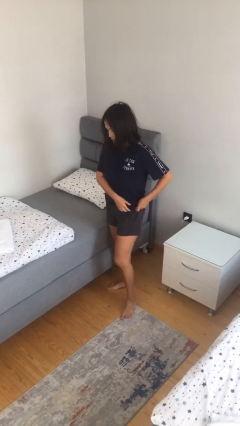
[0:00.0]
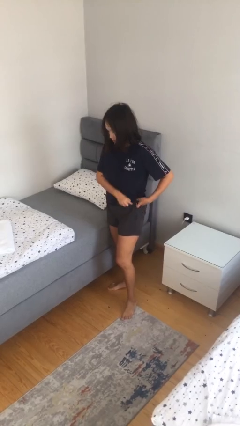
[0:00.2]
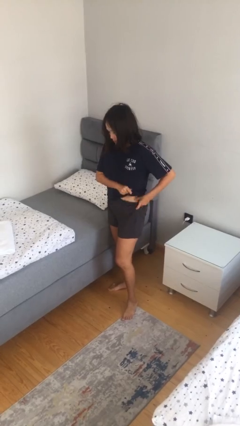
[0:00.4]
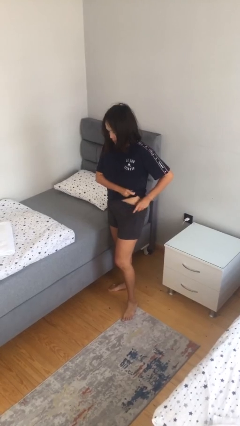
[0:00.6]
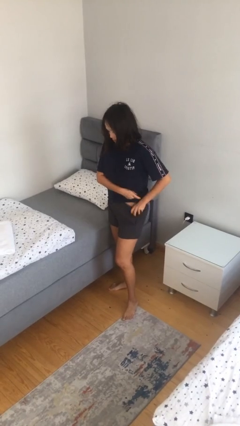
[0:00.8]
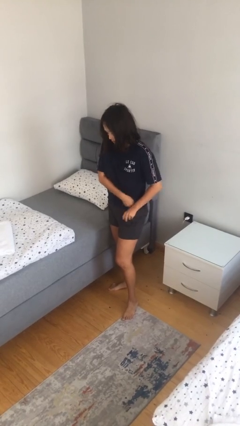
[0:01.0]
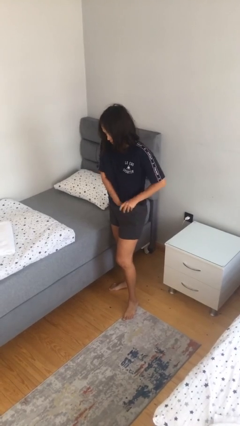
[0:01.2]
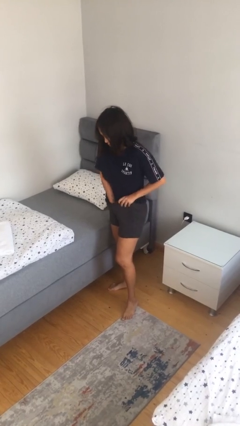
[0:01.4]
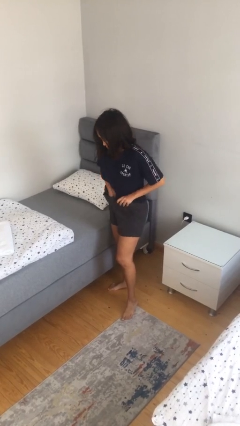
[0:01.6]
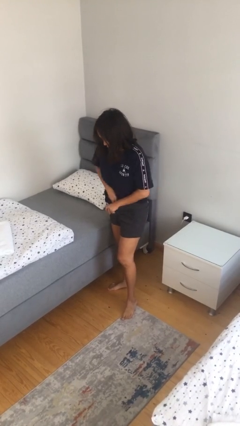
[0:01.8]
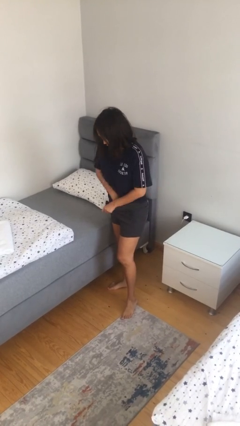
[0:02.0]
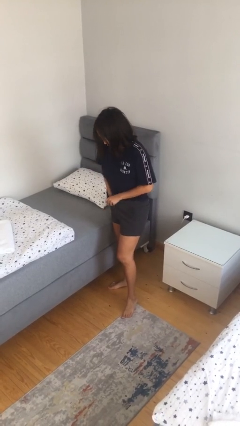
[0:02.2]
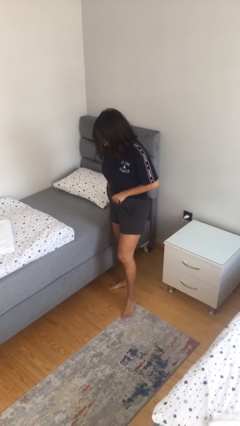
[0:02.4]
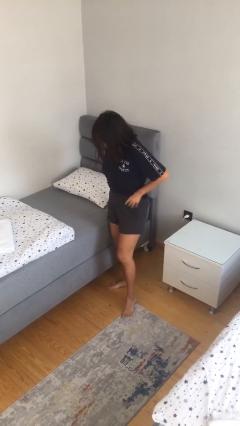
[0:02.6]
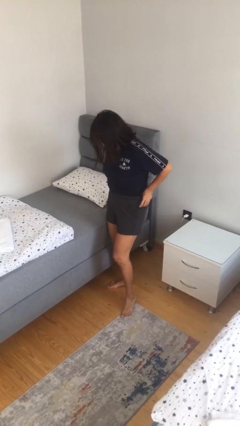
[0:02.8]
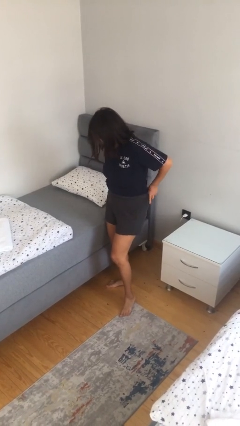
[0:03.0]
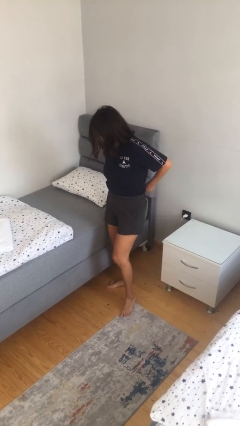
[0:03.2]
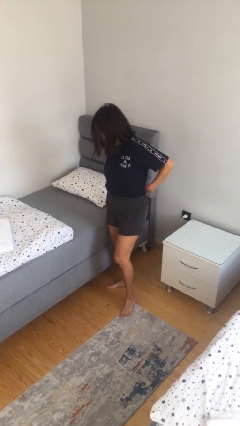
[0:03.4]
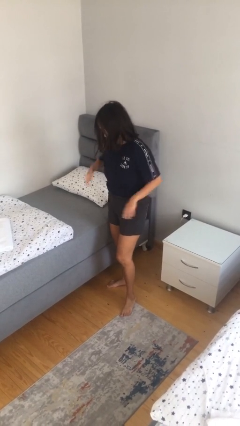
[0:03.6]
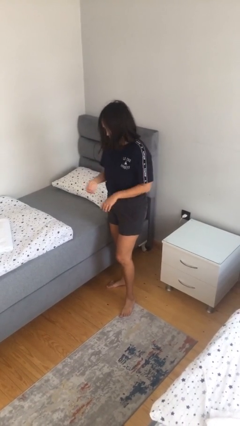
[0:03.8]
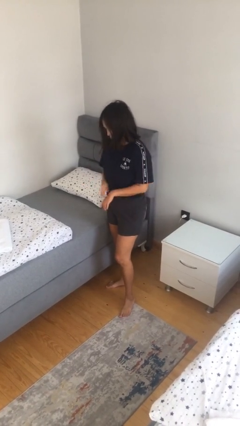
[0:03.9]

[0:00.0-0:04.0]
person tucks in shirt

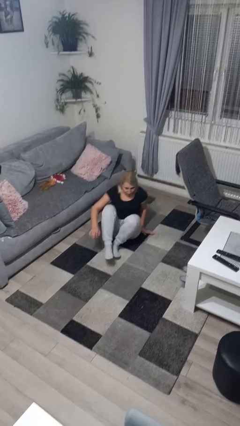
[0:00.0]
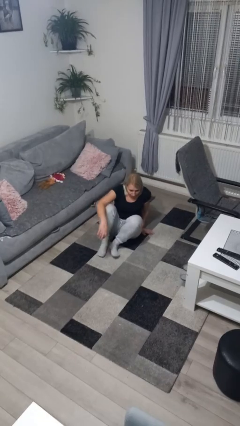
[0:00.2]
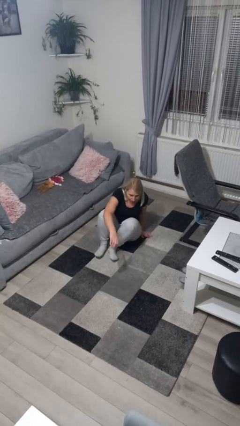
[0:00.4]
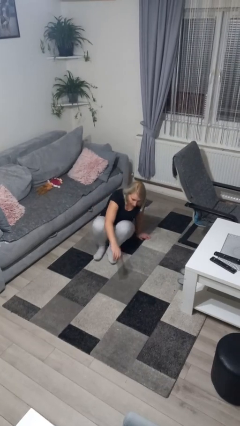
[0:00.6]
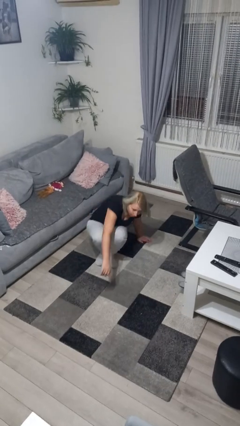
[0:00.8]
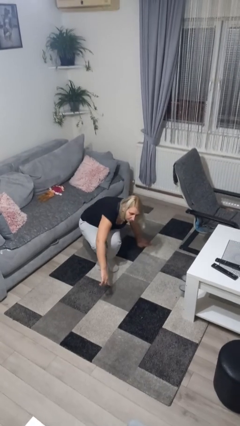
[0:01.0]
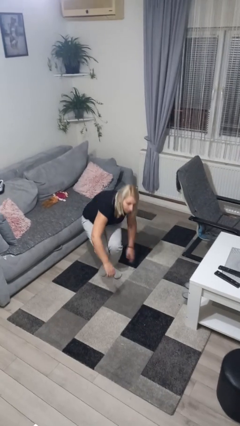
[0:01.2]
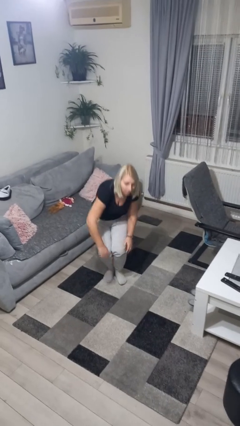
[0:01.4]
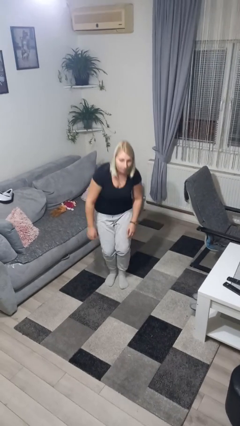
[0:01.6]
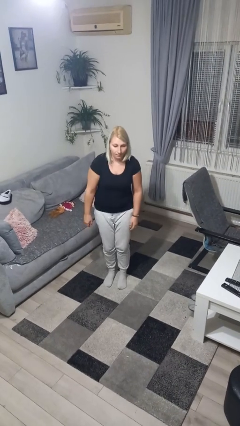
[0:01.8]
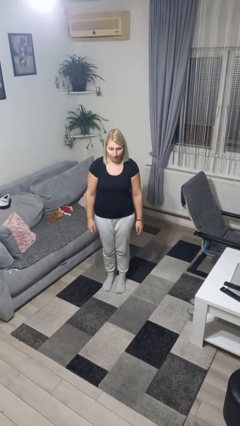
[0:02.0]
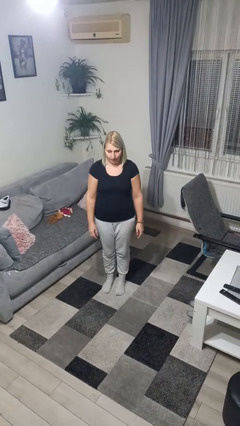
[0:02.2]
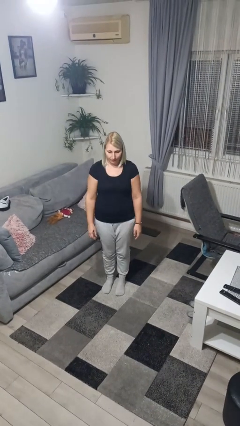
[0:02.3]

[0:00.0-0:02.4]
person stands up from floor

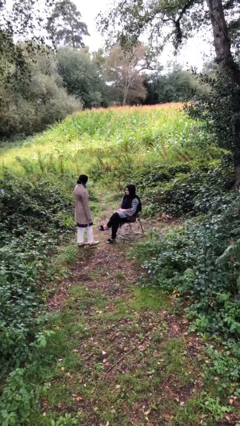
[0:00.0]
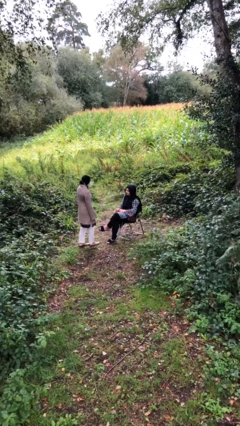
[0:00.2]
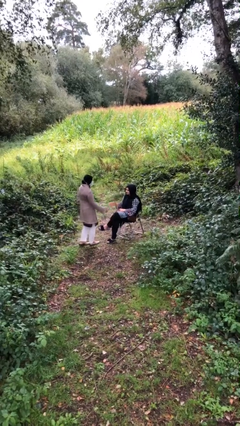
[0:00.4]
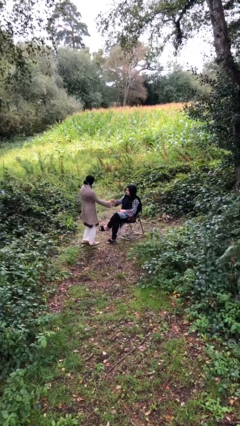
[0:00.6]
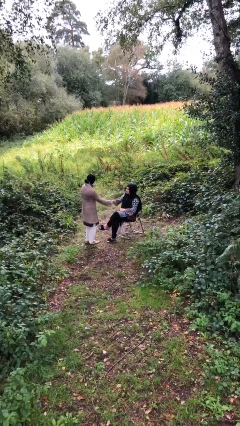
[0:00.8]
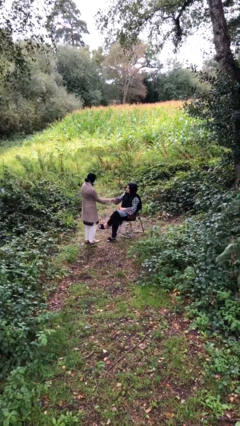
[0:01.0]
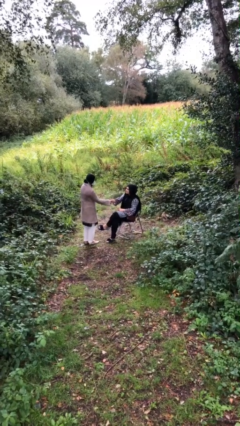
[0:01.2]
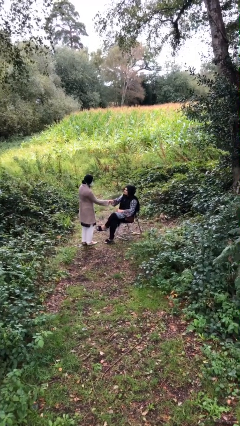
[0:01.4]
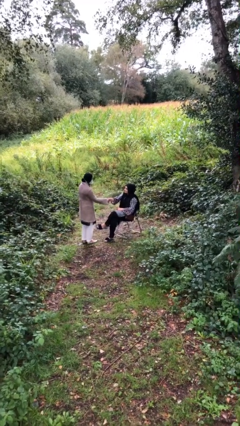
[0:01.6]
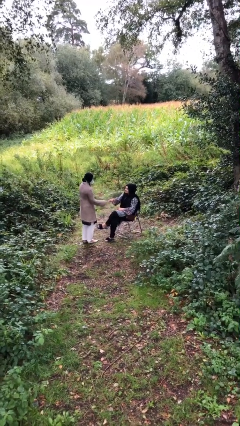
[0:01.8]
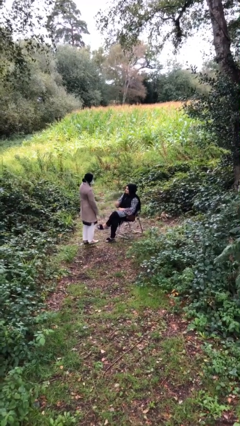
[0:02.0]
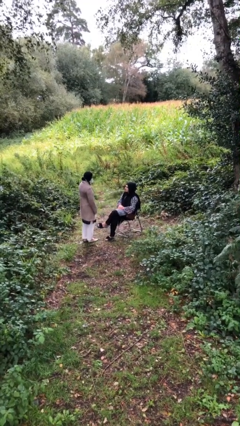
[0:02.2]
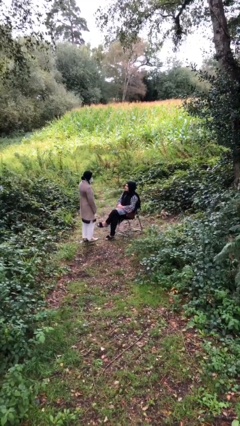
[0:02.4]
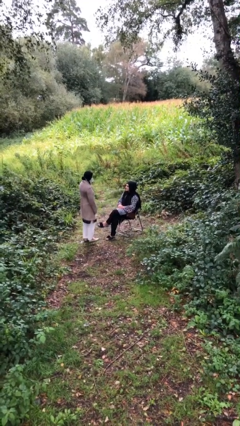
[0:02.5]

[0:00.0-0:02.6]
person shakes hand

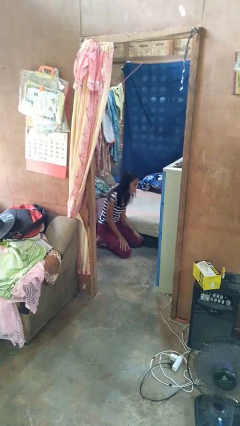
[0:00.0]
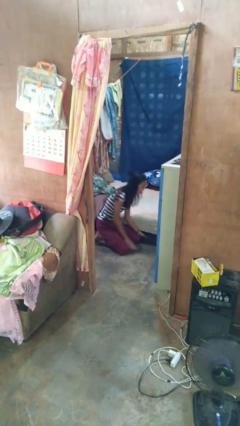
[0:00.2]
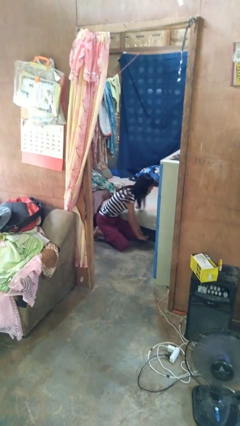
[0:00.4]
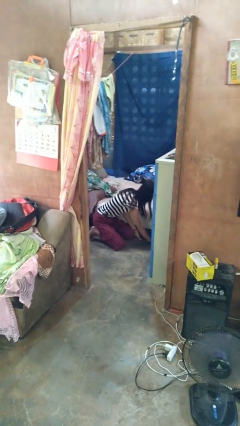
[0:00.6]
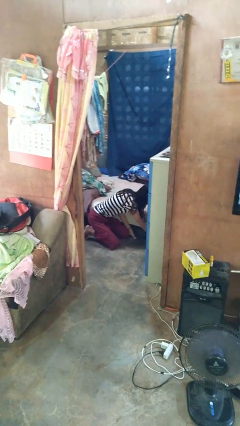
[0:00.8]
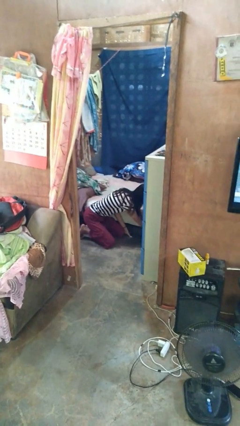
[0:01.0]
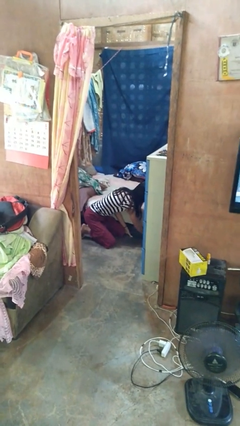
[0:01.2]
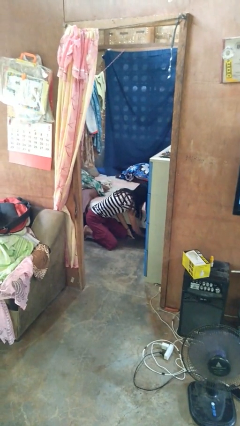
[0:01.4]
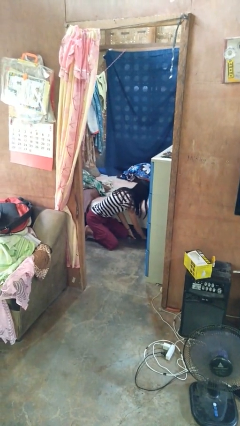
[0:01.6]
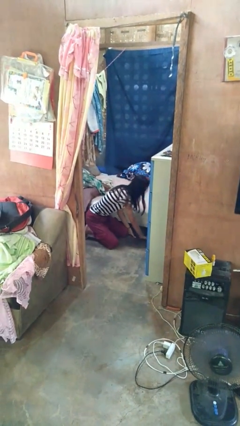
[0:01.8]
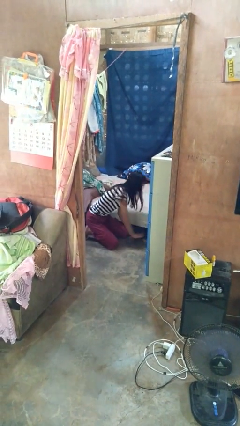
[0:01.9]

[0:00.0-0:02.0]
person searches under bed

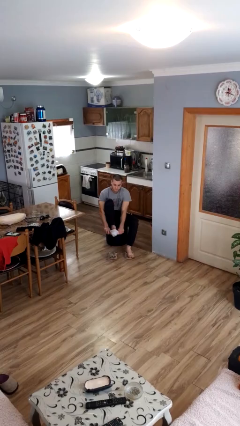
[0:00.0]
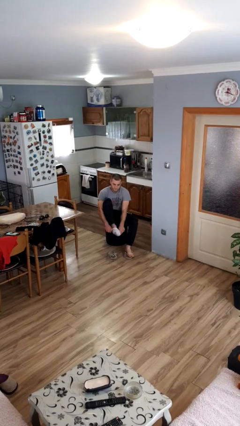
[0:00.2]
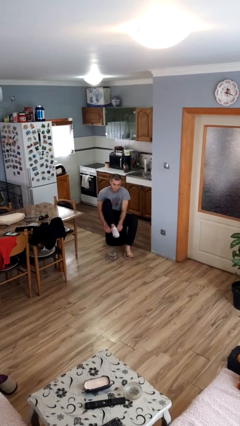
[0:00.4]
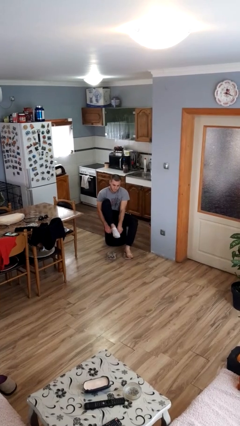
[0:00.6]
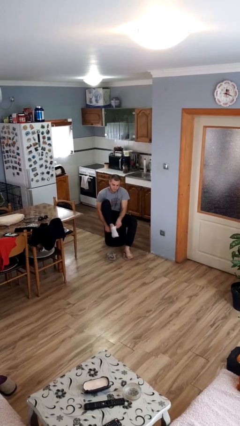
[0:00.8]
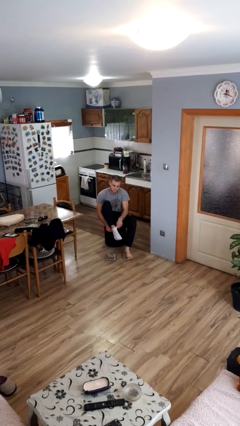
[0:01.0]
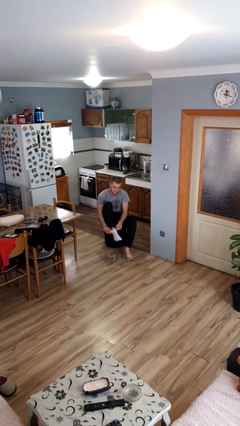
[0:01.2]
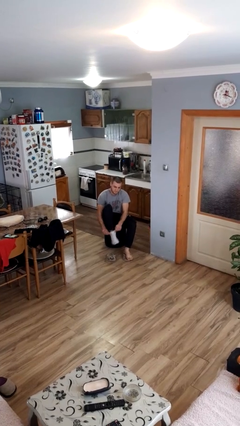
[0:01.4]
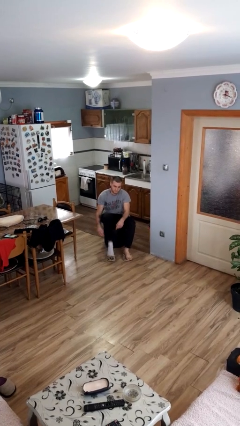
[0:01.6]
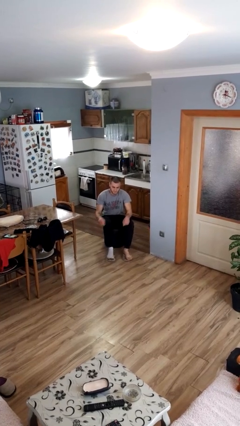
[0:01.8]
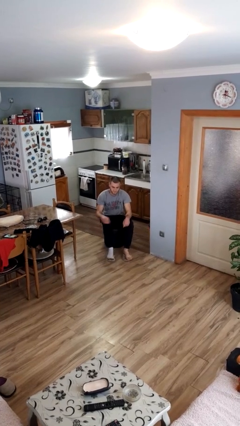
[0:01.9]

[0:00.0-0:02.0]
person puts on socks

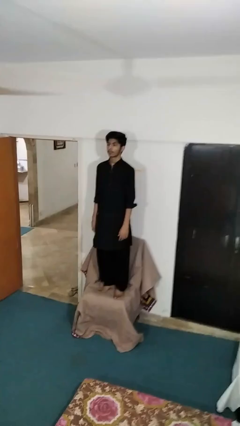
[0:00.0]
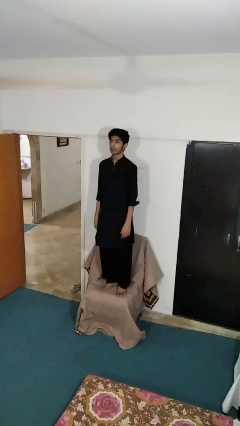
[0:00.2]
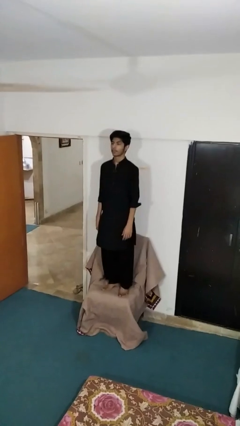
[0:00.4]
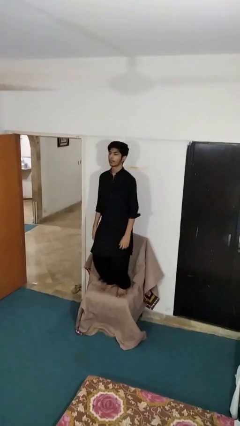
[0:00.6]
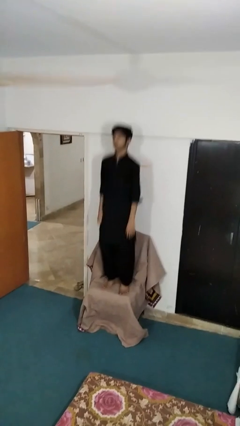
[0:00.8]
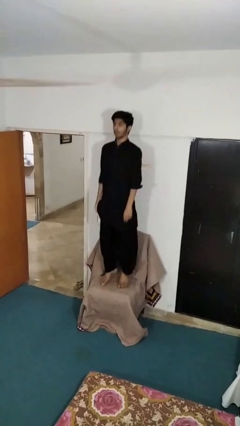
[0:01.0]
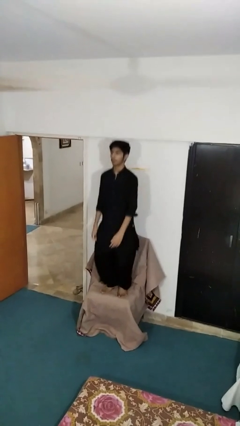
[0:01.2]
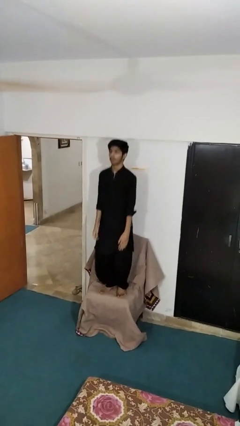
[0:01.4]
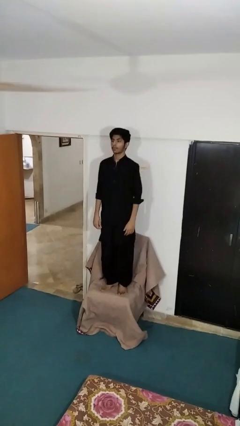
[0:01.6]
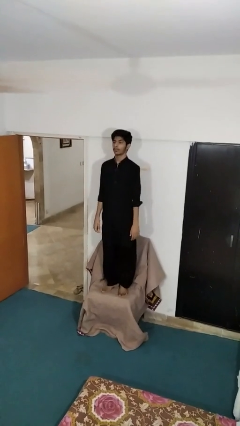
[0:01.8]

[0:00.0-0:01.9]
person jumps on couch

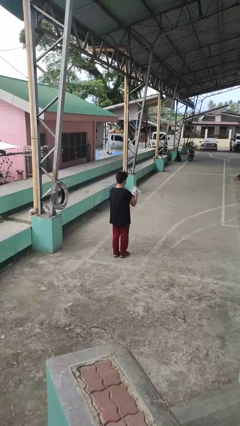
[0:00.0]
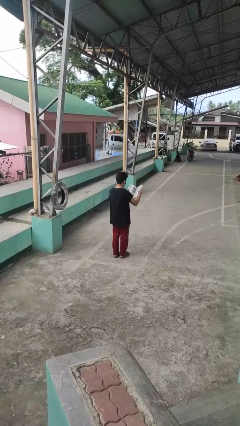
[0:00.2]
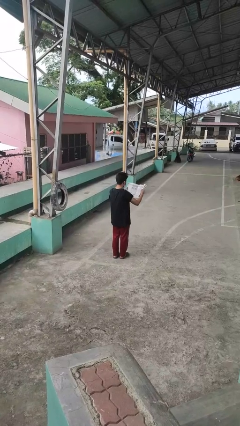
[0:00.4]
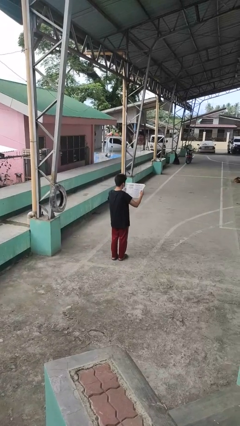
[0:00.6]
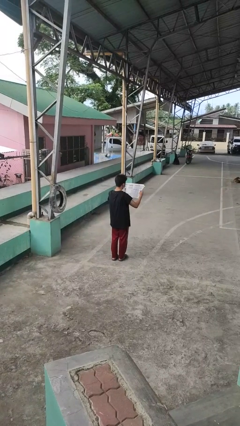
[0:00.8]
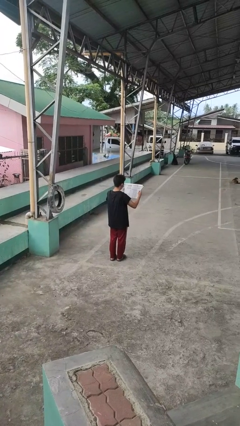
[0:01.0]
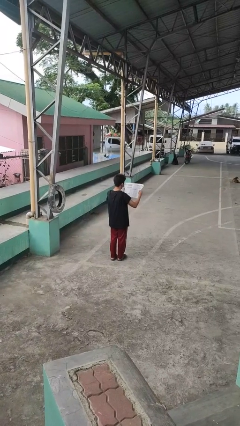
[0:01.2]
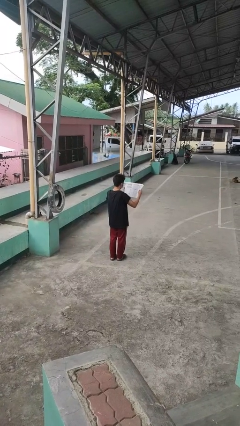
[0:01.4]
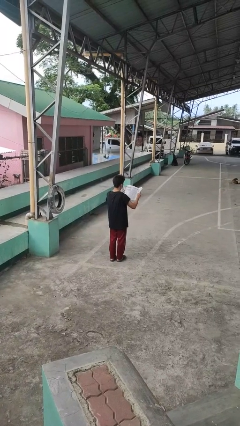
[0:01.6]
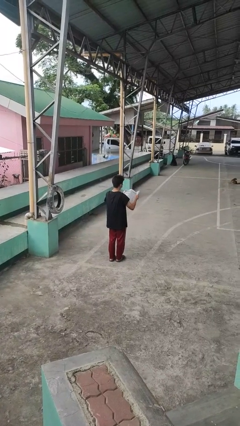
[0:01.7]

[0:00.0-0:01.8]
person reads newspaper

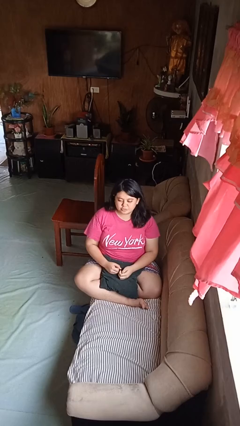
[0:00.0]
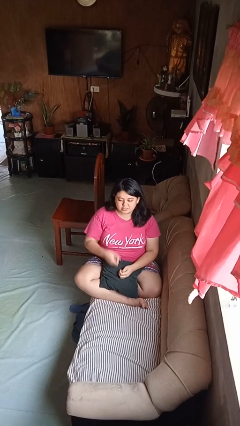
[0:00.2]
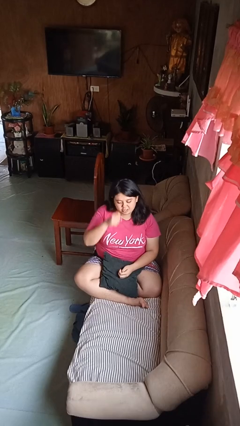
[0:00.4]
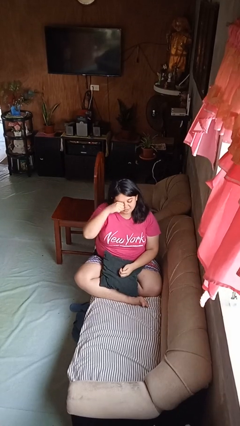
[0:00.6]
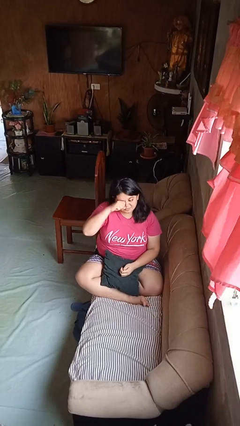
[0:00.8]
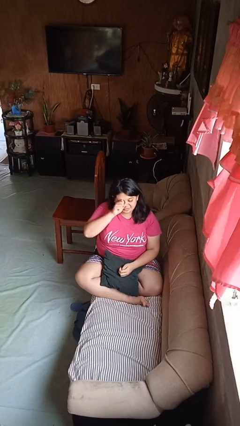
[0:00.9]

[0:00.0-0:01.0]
person rubs eyes
